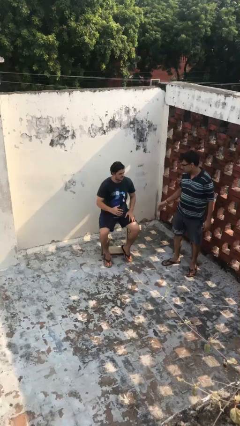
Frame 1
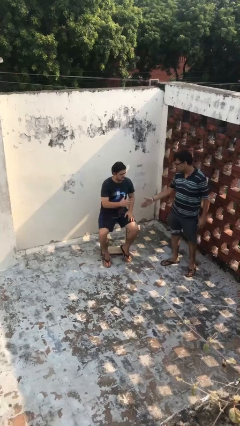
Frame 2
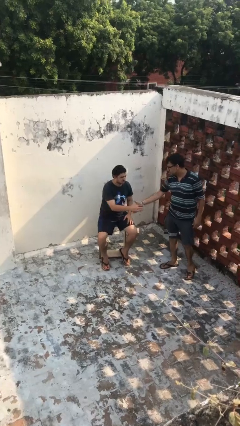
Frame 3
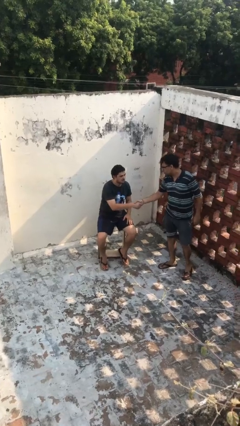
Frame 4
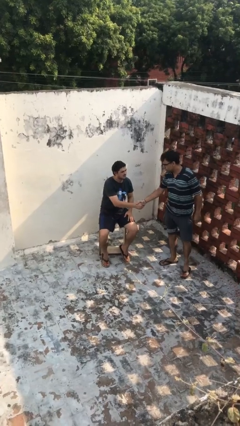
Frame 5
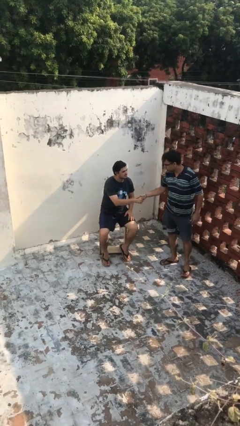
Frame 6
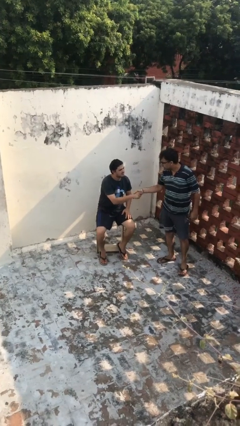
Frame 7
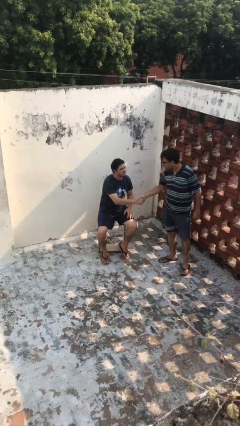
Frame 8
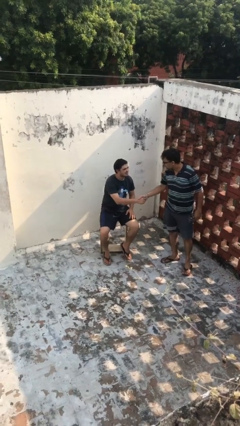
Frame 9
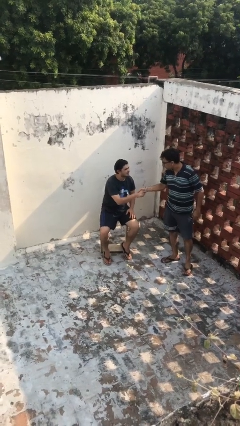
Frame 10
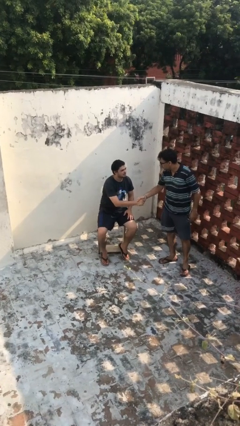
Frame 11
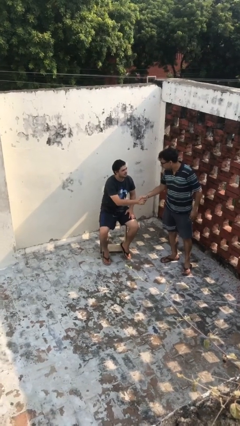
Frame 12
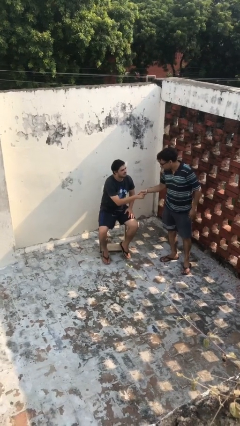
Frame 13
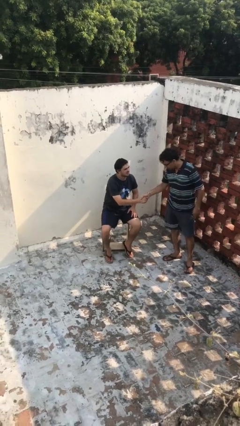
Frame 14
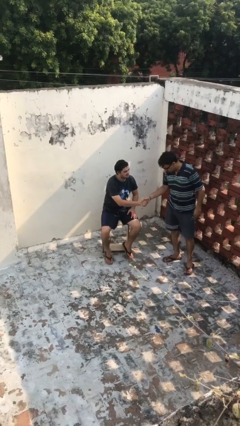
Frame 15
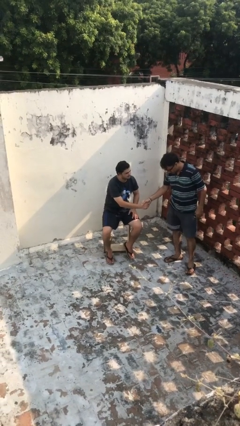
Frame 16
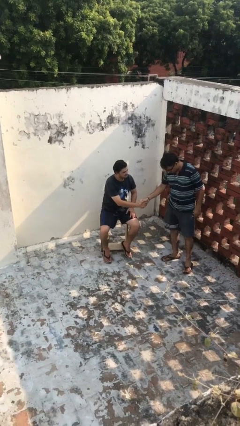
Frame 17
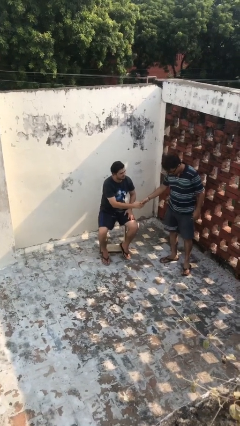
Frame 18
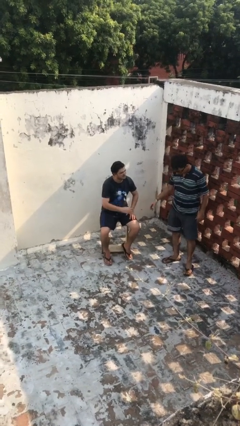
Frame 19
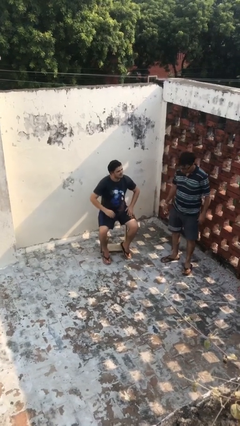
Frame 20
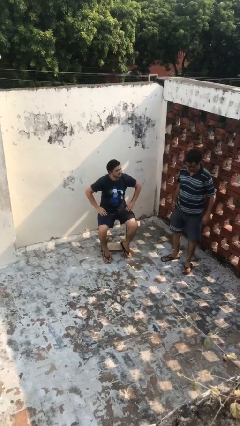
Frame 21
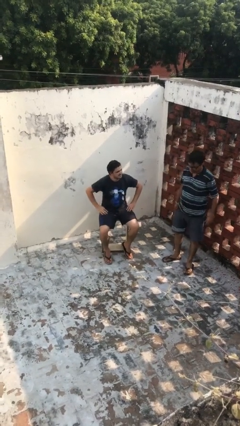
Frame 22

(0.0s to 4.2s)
person shakes hand

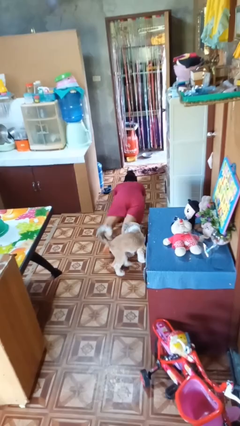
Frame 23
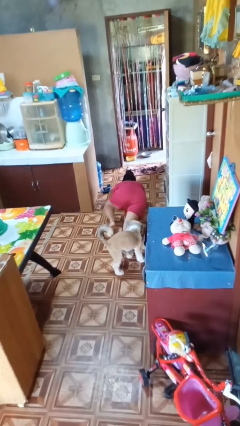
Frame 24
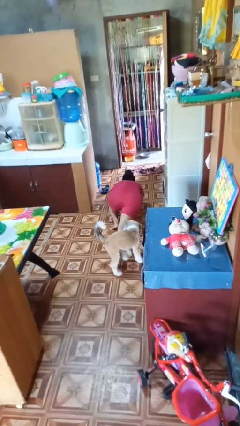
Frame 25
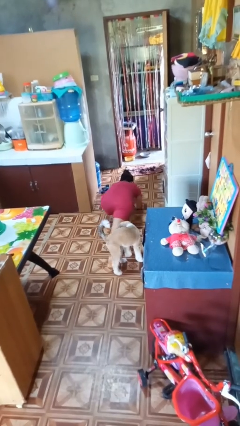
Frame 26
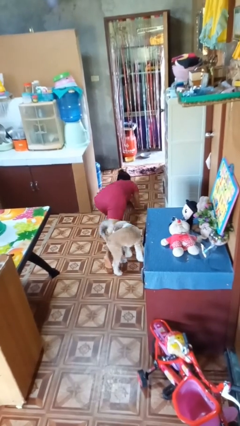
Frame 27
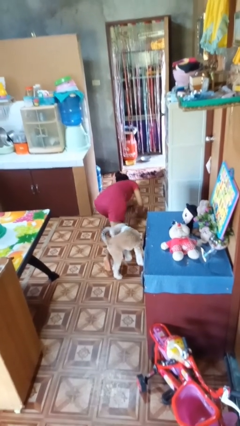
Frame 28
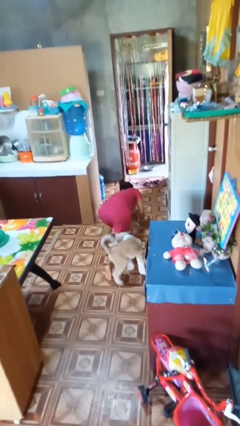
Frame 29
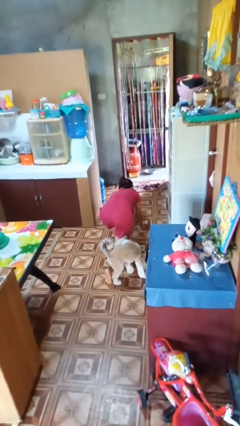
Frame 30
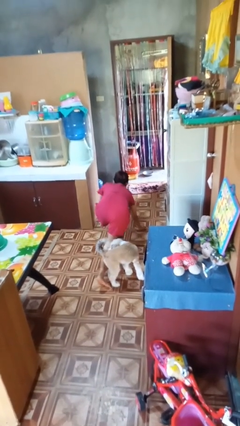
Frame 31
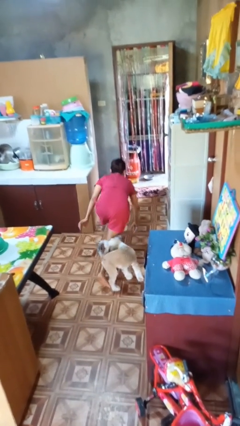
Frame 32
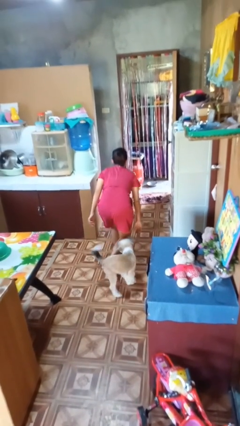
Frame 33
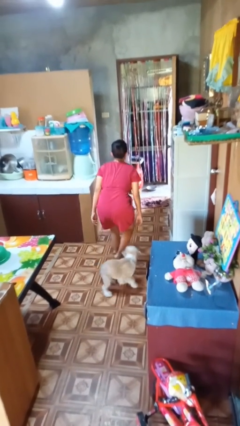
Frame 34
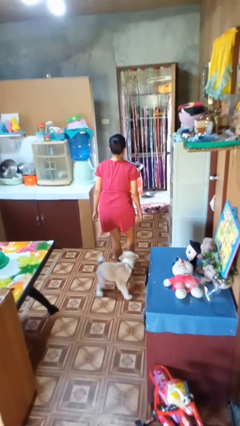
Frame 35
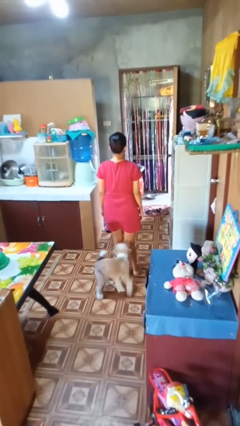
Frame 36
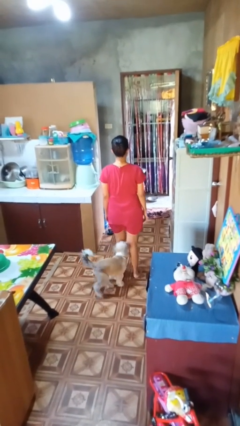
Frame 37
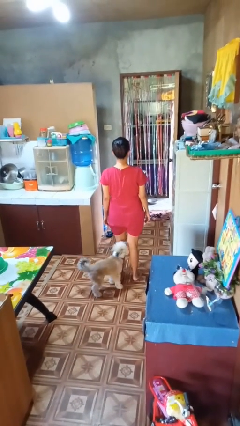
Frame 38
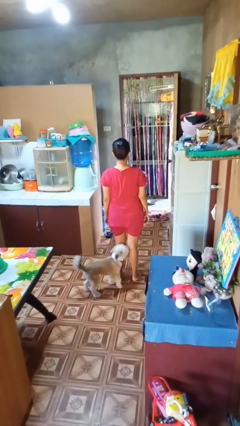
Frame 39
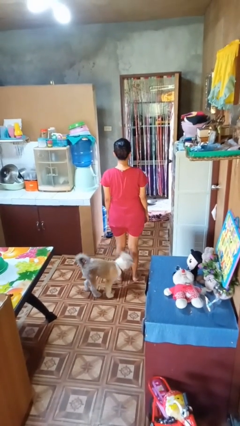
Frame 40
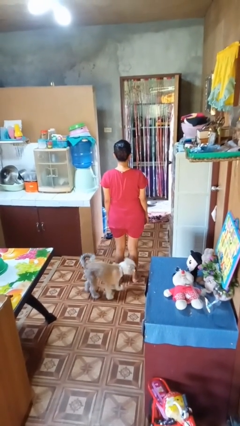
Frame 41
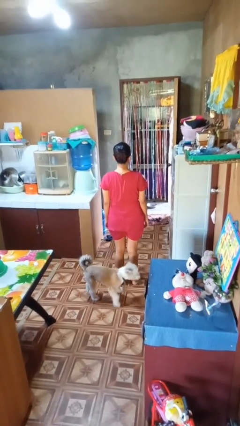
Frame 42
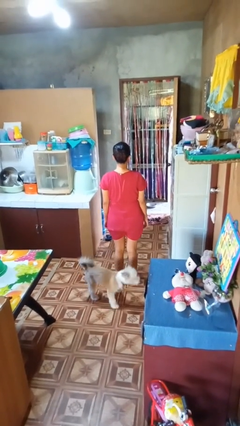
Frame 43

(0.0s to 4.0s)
person stands up from floor

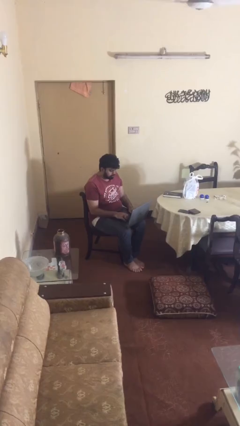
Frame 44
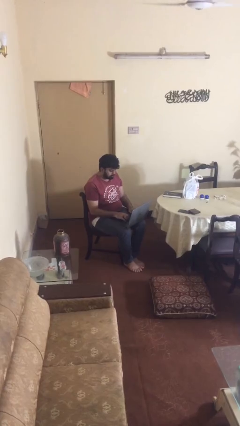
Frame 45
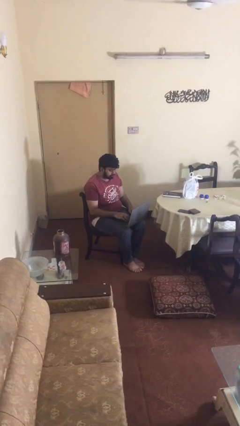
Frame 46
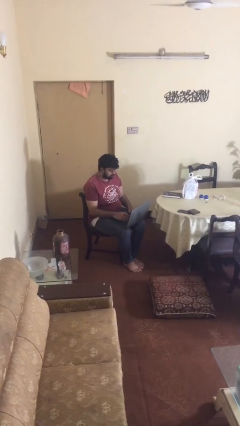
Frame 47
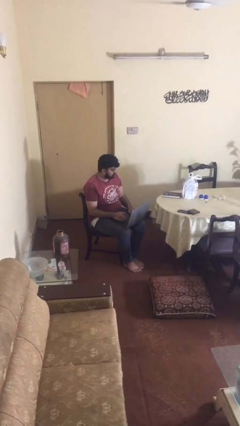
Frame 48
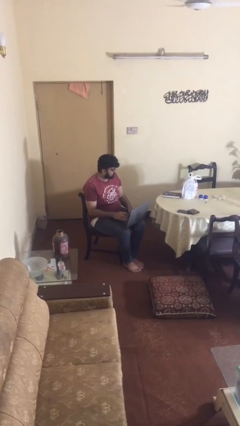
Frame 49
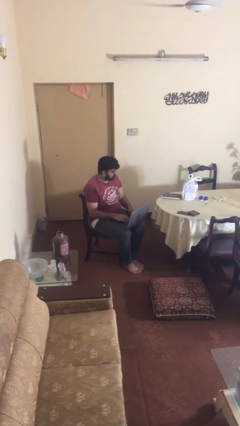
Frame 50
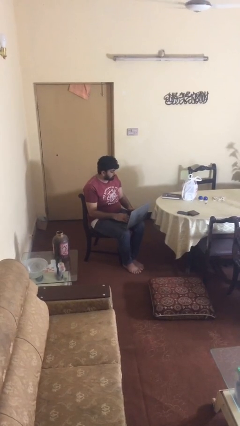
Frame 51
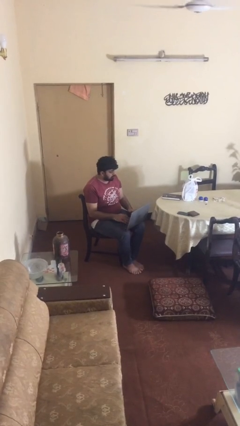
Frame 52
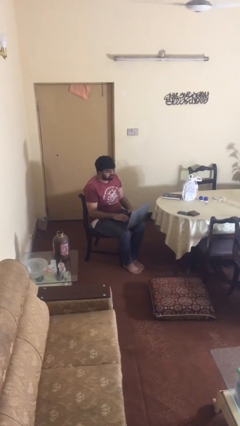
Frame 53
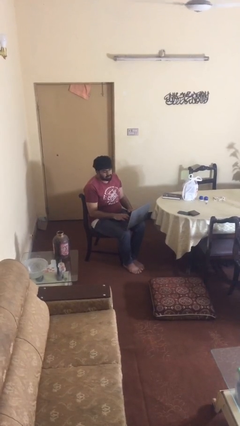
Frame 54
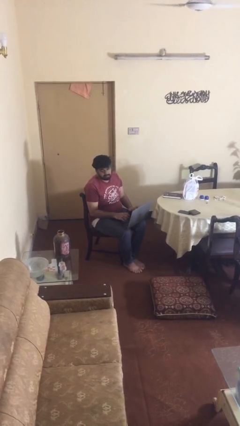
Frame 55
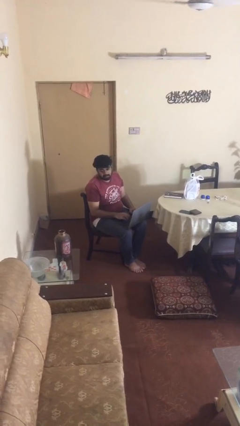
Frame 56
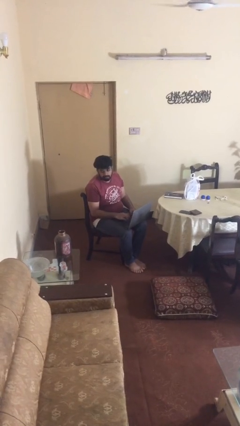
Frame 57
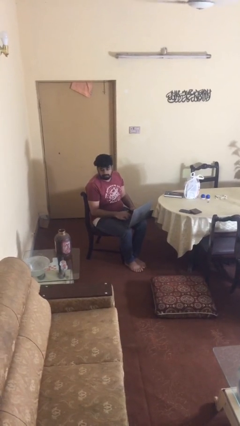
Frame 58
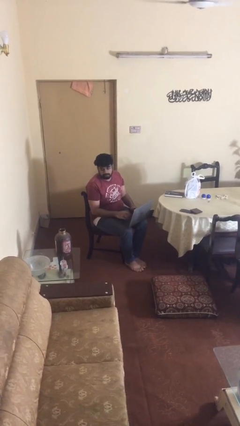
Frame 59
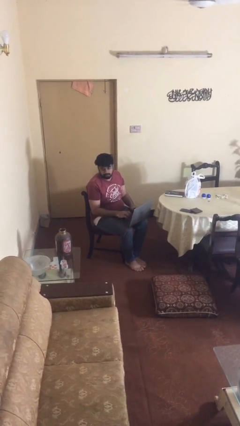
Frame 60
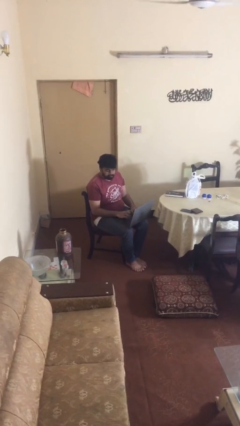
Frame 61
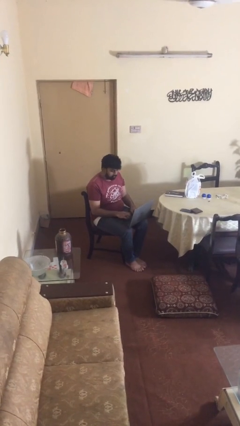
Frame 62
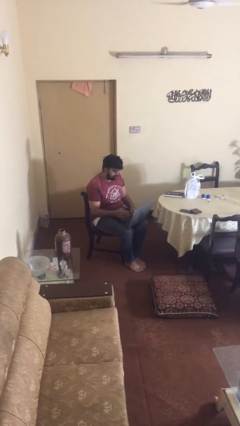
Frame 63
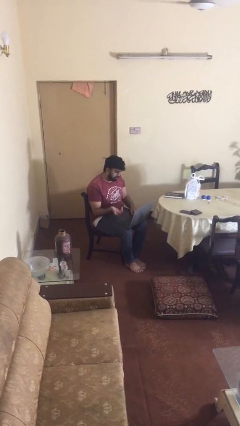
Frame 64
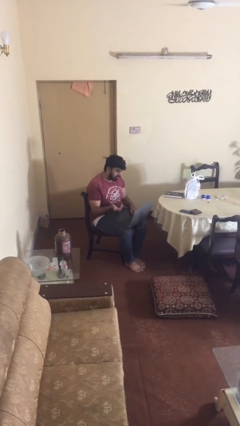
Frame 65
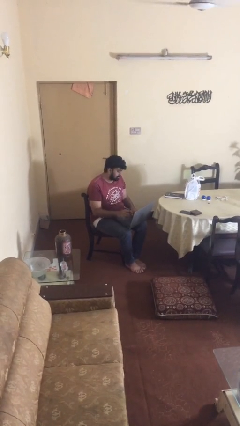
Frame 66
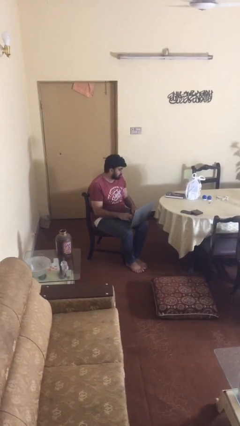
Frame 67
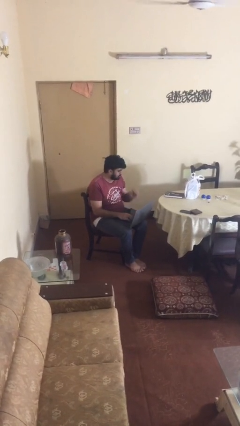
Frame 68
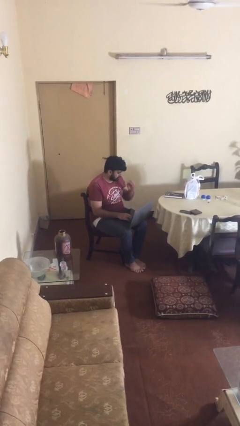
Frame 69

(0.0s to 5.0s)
person interacts with laptop

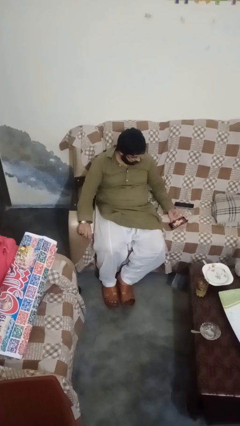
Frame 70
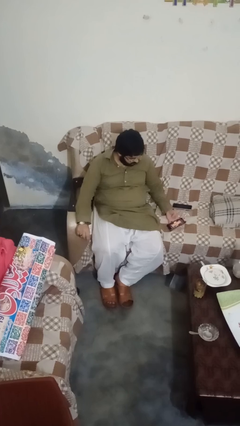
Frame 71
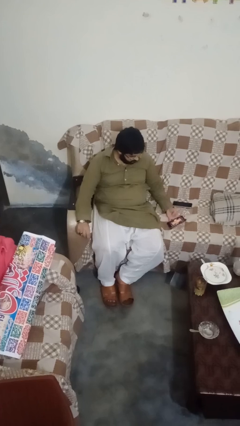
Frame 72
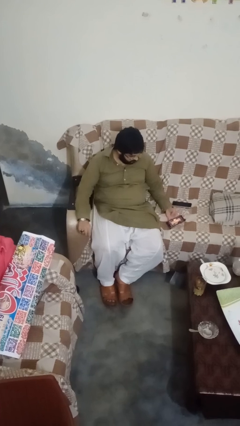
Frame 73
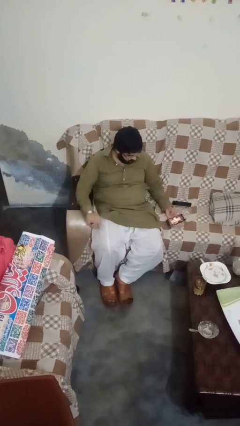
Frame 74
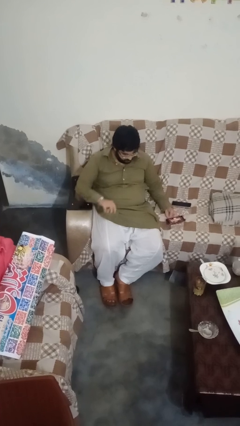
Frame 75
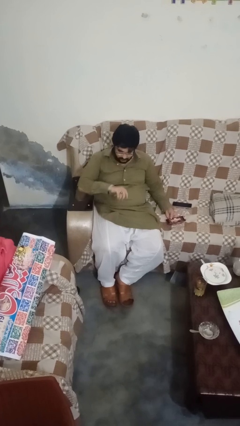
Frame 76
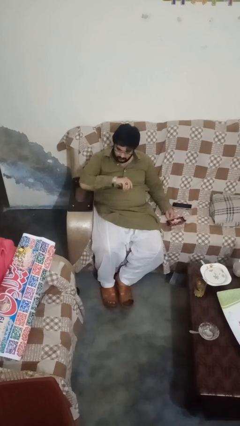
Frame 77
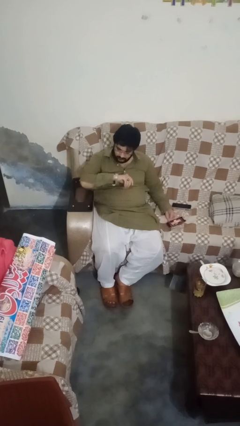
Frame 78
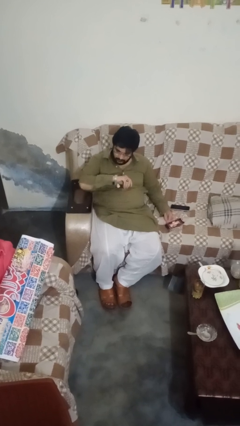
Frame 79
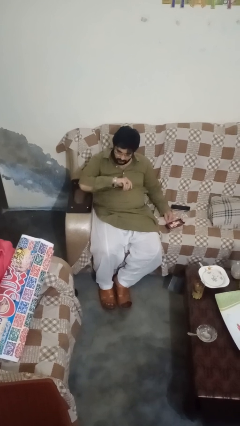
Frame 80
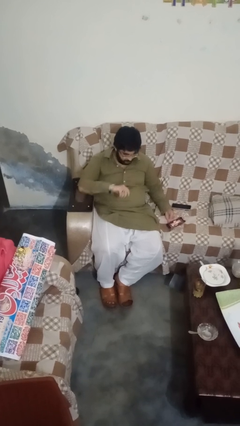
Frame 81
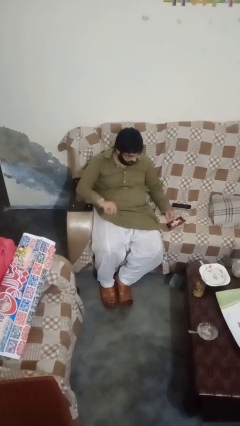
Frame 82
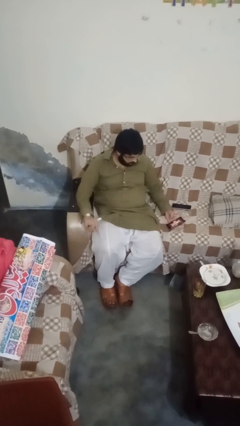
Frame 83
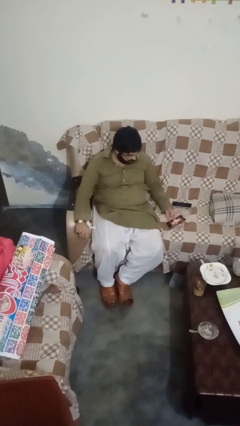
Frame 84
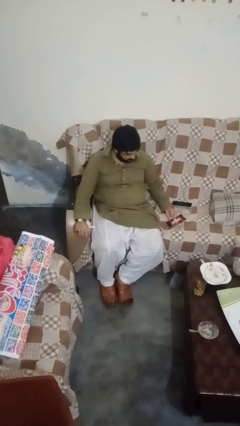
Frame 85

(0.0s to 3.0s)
person looks at wristwatch

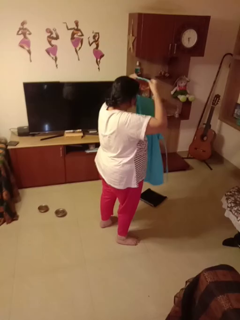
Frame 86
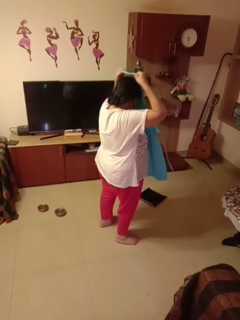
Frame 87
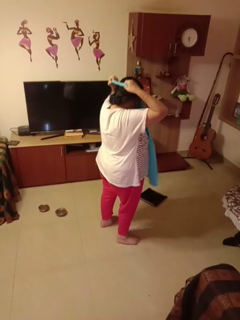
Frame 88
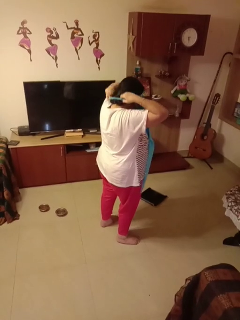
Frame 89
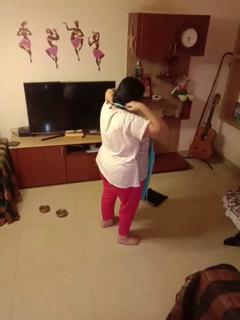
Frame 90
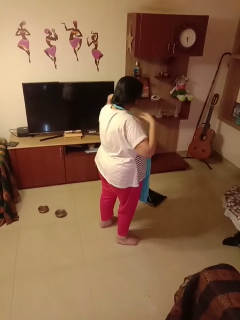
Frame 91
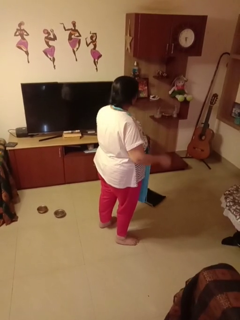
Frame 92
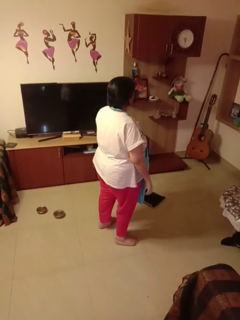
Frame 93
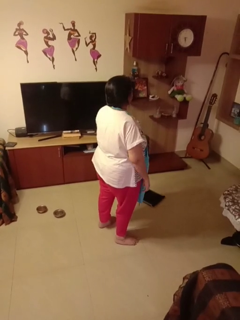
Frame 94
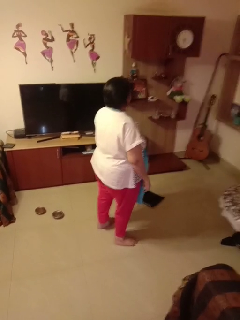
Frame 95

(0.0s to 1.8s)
person puts on apron
